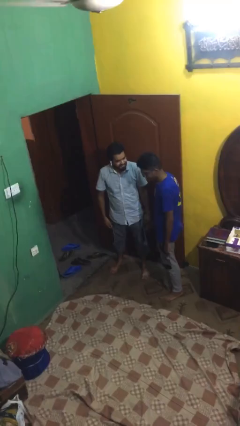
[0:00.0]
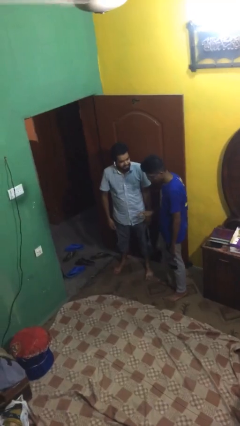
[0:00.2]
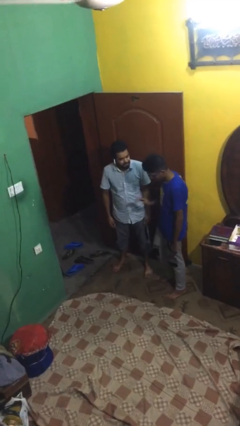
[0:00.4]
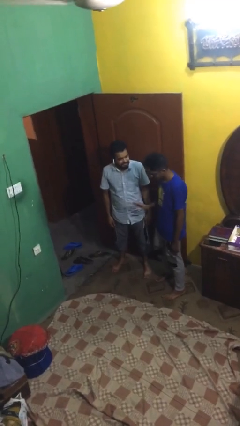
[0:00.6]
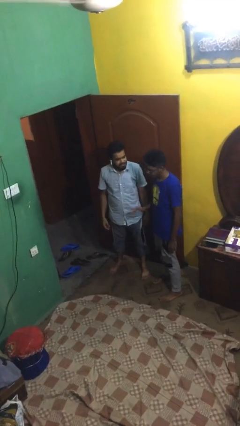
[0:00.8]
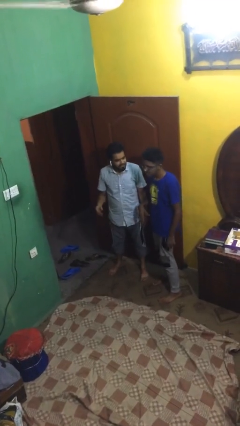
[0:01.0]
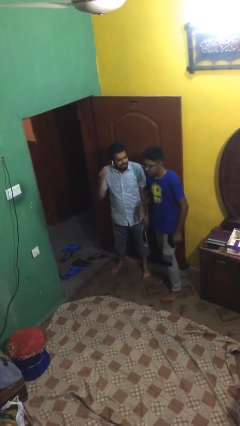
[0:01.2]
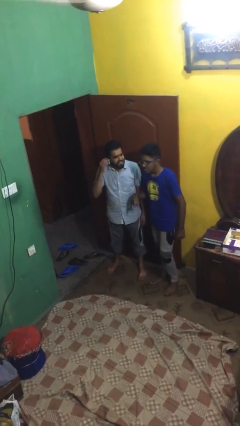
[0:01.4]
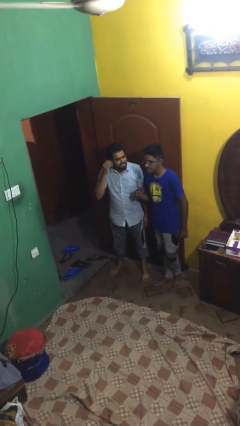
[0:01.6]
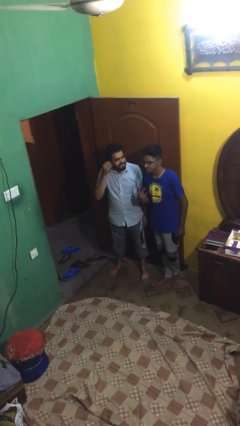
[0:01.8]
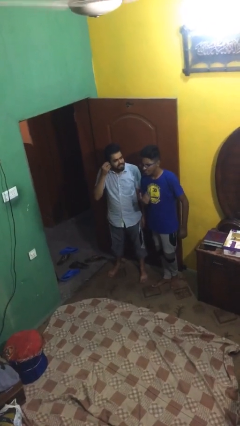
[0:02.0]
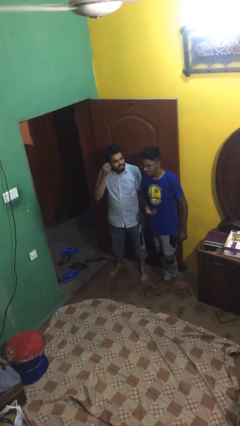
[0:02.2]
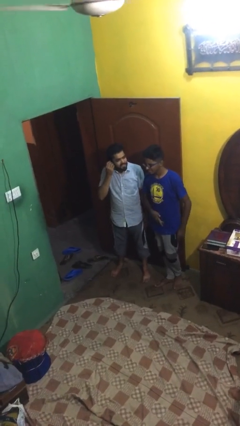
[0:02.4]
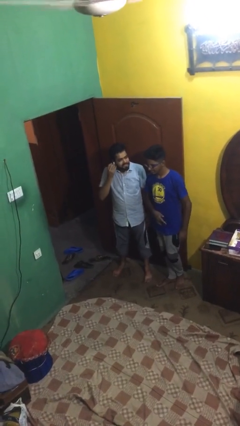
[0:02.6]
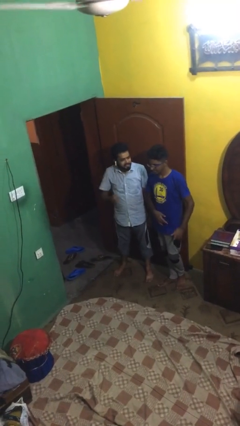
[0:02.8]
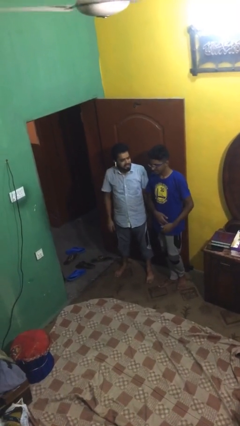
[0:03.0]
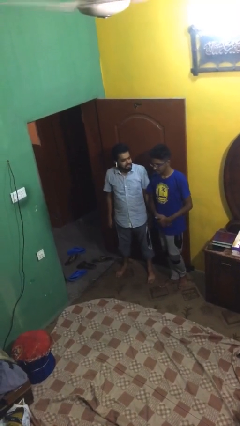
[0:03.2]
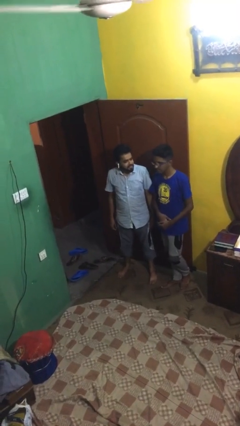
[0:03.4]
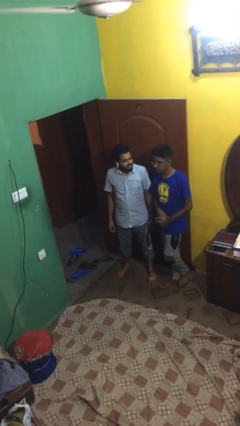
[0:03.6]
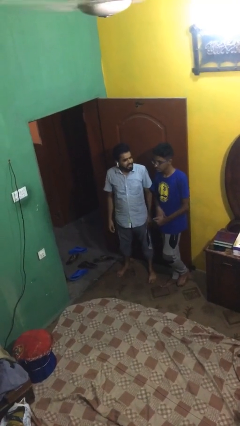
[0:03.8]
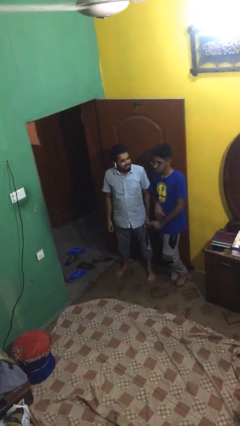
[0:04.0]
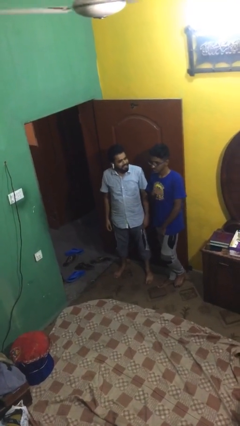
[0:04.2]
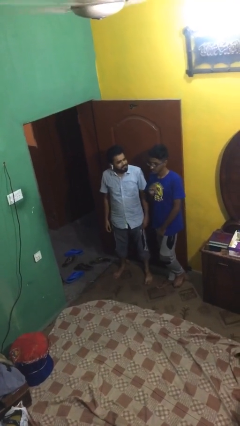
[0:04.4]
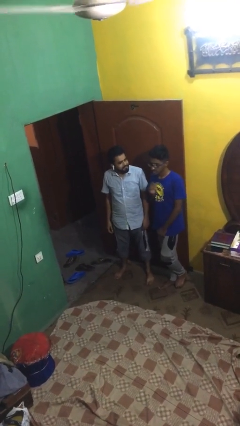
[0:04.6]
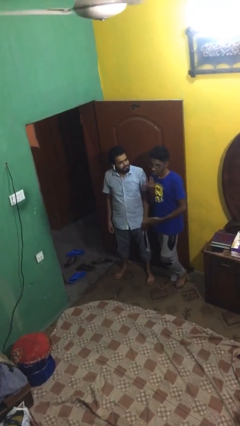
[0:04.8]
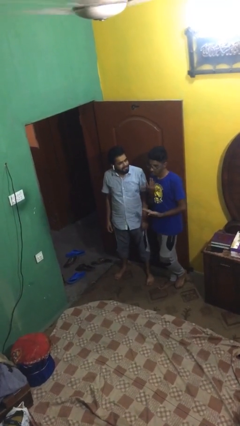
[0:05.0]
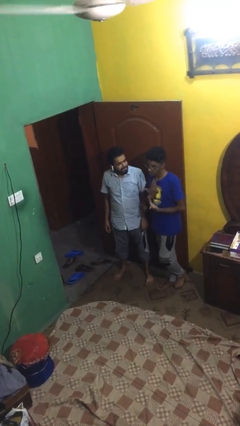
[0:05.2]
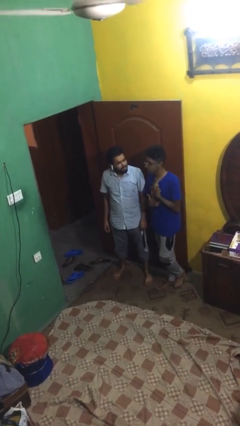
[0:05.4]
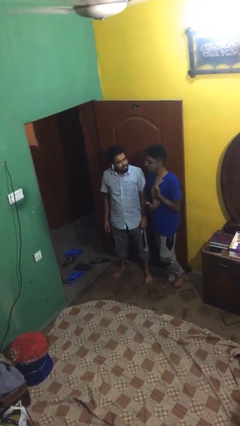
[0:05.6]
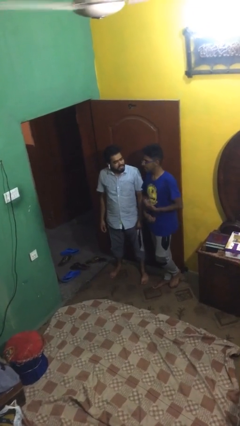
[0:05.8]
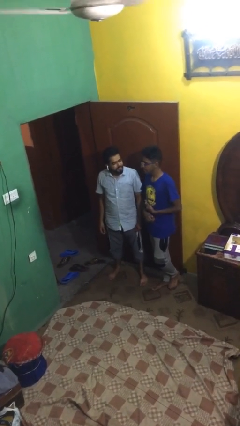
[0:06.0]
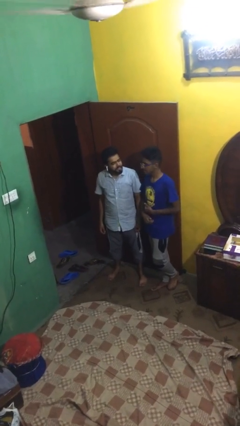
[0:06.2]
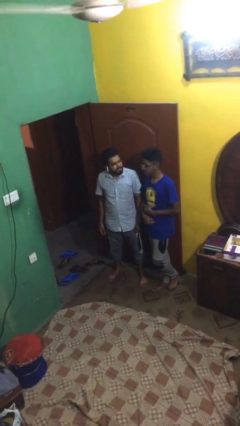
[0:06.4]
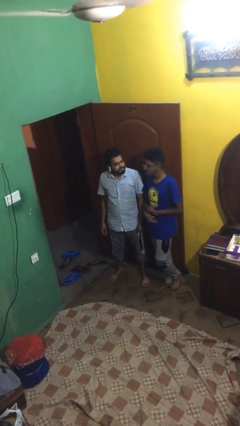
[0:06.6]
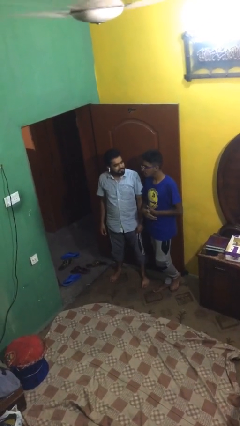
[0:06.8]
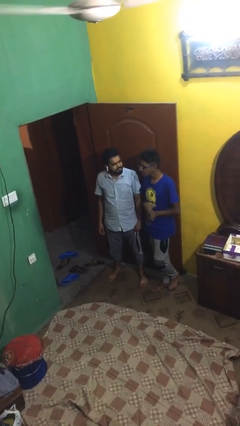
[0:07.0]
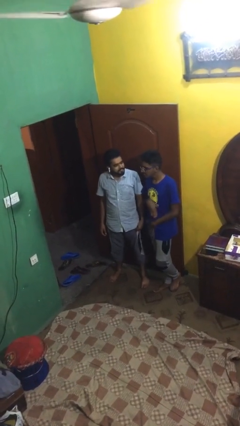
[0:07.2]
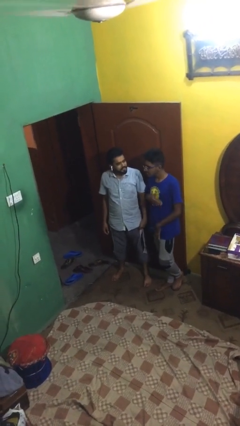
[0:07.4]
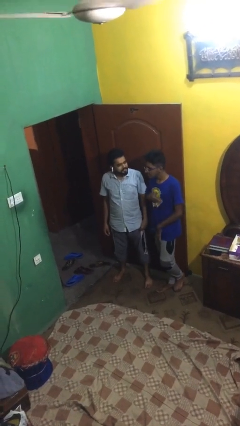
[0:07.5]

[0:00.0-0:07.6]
person talks to person

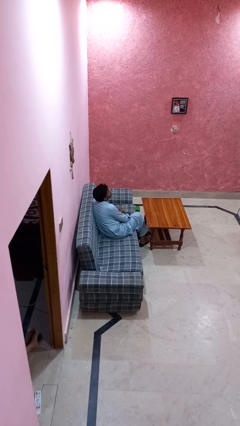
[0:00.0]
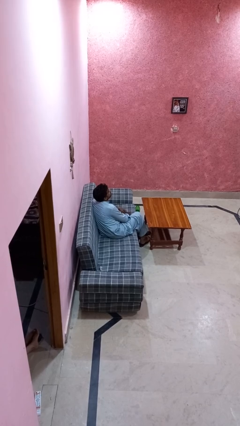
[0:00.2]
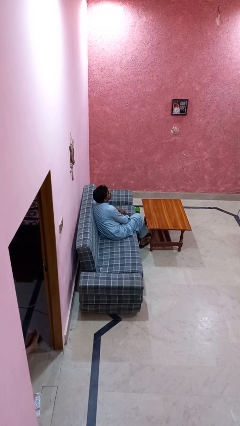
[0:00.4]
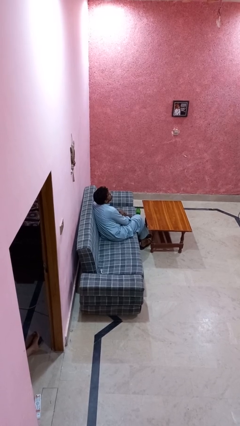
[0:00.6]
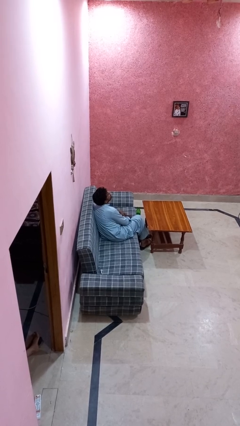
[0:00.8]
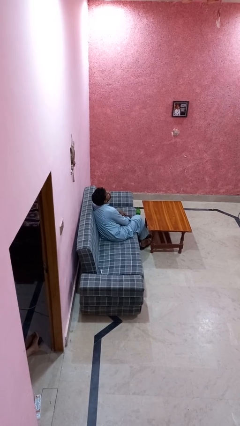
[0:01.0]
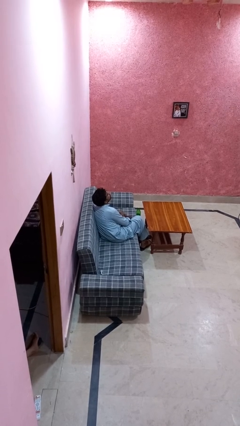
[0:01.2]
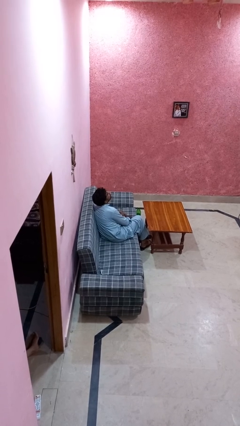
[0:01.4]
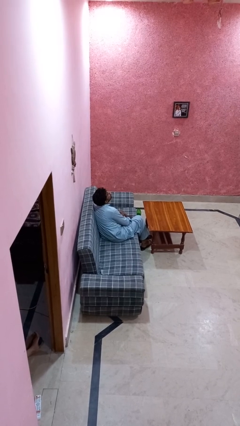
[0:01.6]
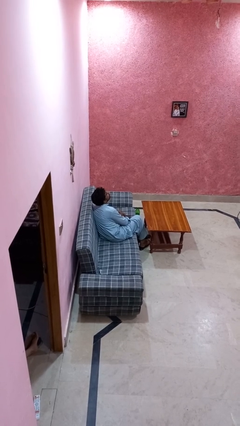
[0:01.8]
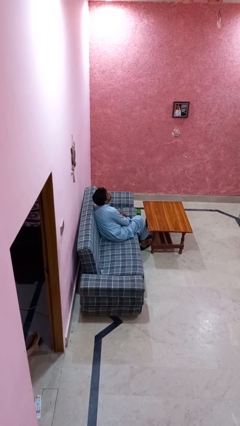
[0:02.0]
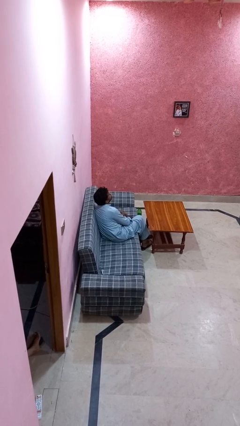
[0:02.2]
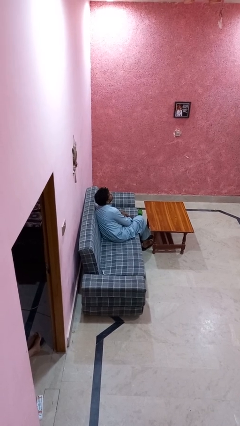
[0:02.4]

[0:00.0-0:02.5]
person sticks out tongue

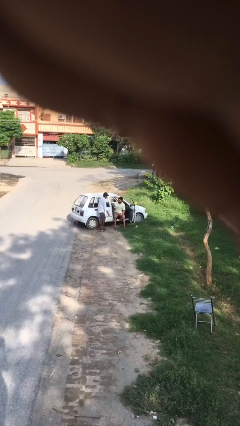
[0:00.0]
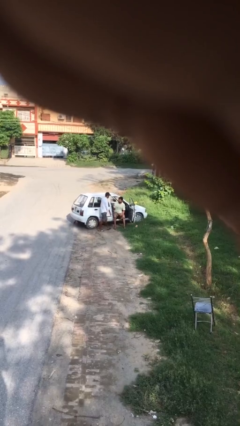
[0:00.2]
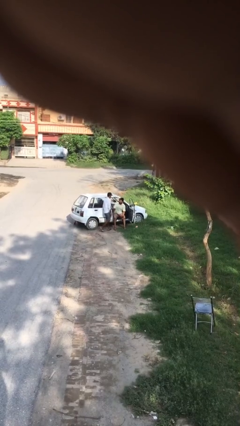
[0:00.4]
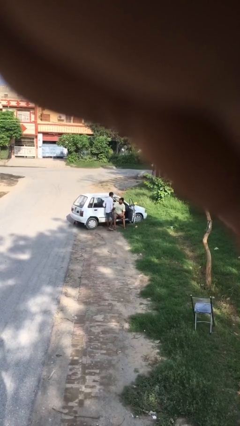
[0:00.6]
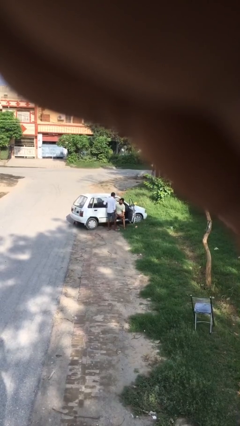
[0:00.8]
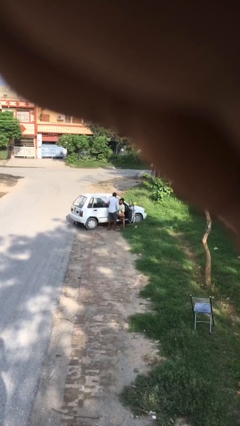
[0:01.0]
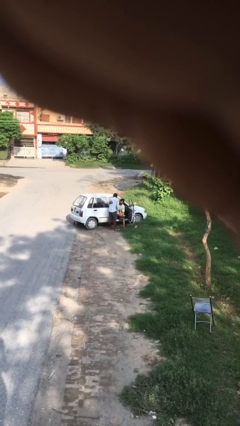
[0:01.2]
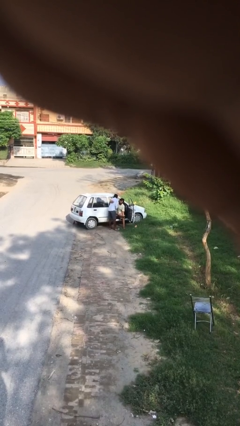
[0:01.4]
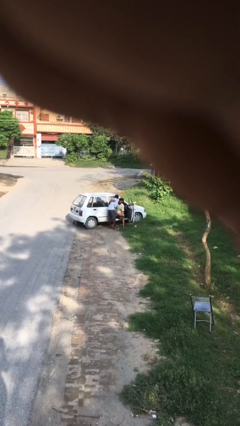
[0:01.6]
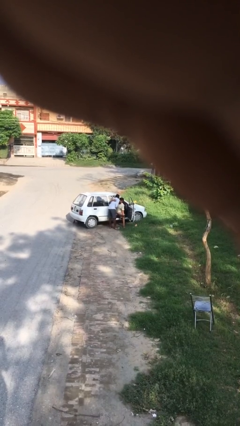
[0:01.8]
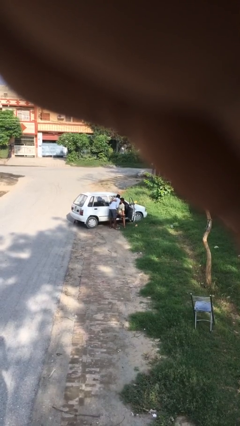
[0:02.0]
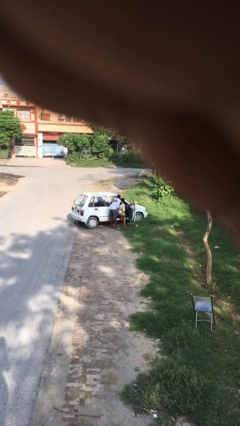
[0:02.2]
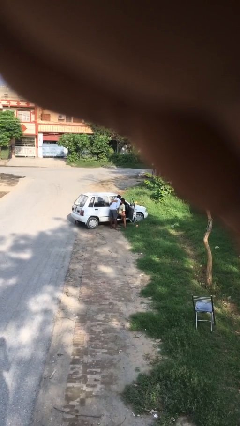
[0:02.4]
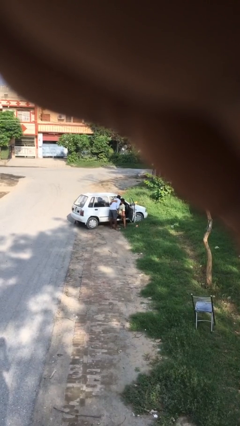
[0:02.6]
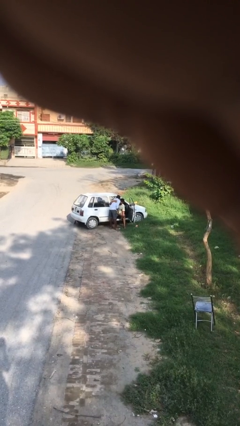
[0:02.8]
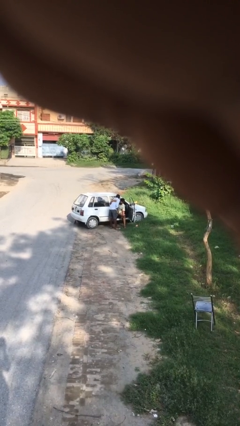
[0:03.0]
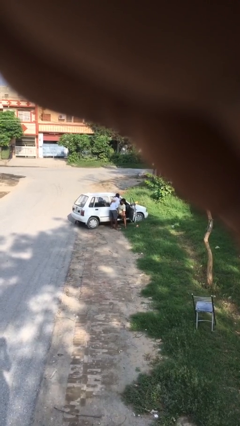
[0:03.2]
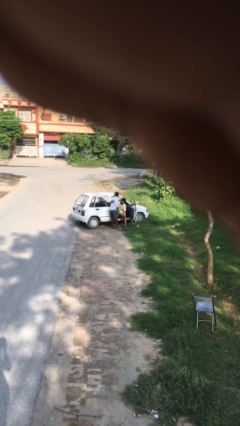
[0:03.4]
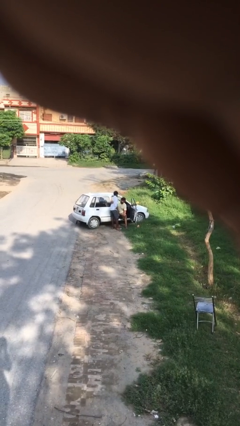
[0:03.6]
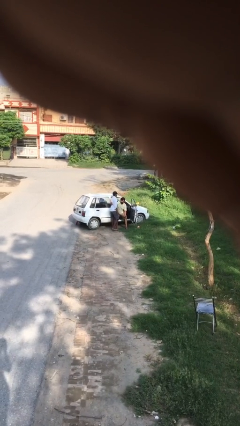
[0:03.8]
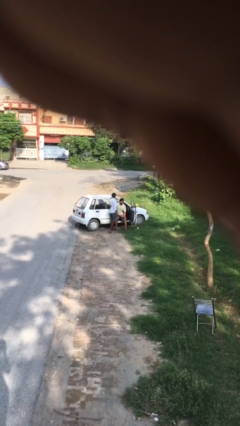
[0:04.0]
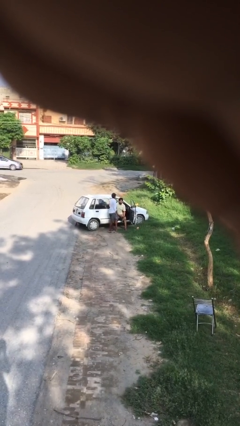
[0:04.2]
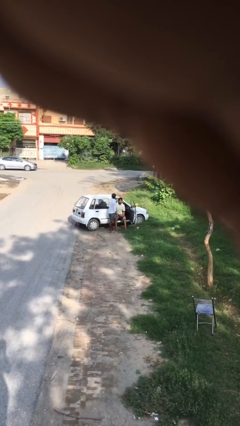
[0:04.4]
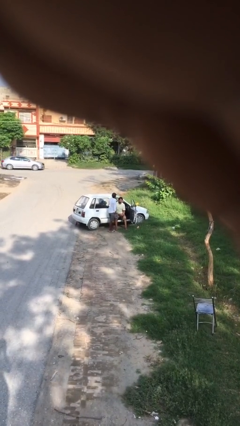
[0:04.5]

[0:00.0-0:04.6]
person embraces person

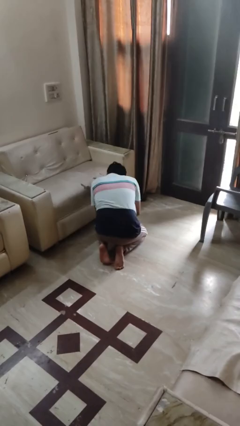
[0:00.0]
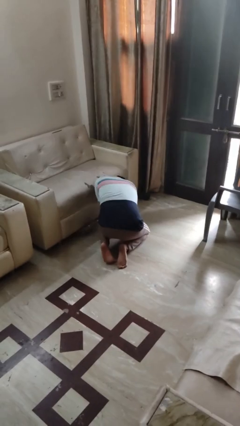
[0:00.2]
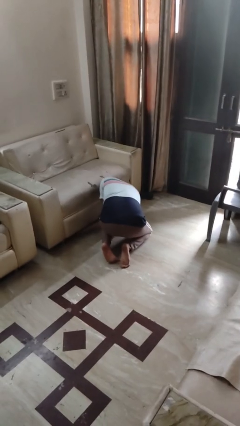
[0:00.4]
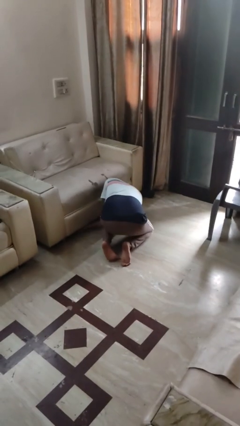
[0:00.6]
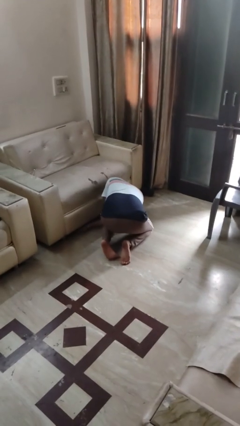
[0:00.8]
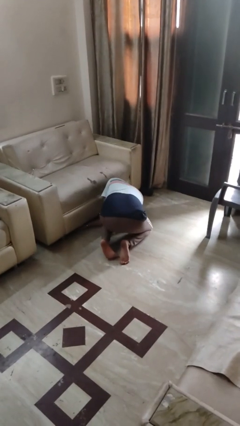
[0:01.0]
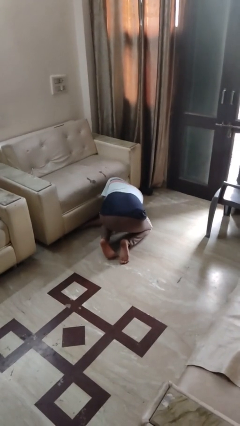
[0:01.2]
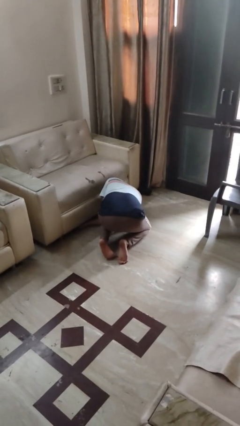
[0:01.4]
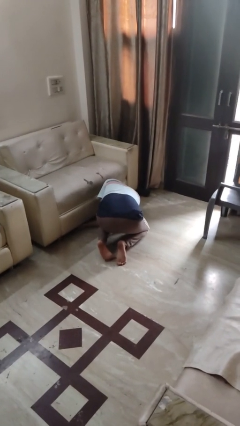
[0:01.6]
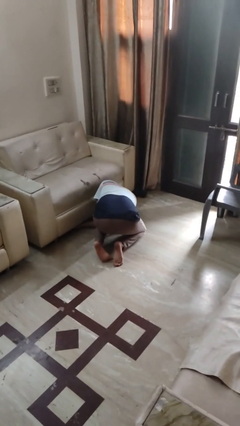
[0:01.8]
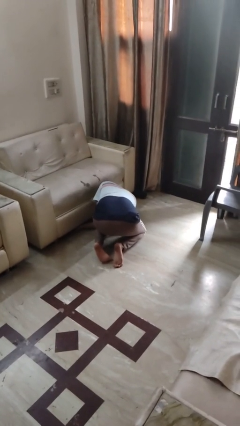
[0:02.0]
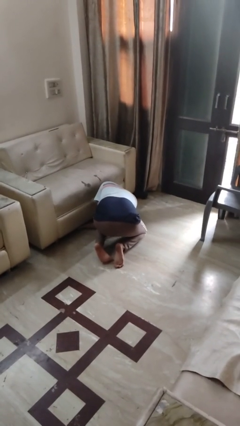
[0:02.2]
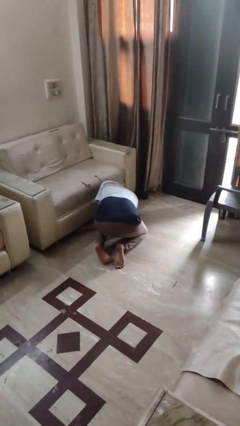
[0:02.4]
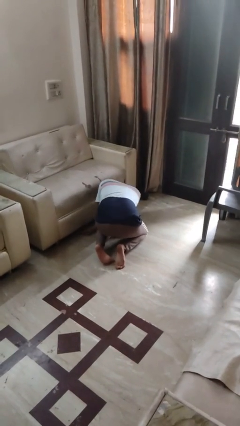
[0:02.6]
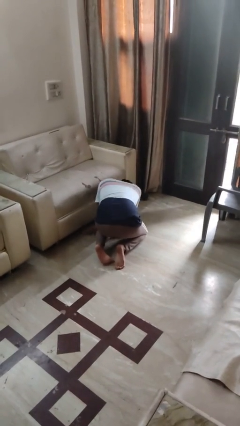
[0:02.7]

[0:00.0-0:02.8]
person searches under couch
